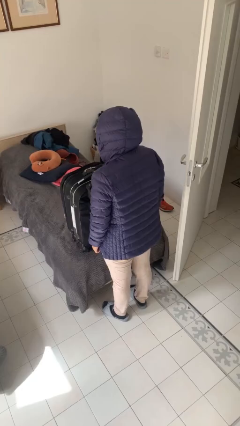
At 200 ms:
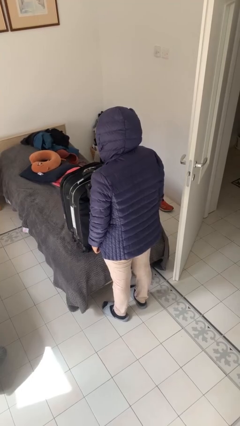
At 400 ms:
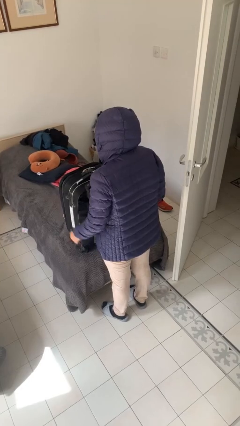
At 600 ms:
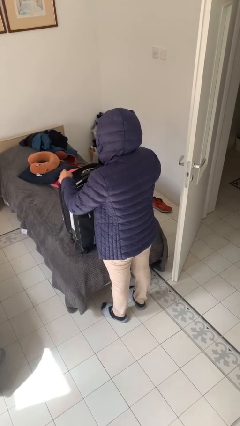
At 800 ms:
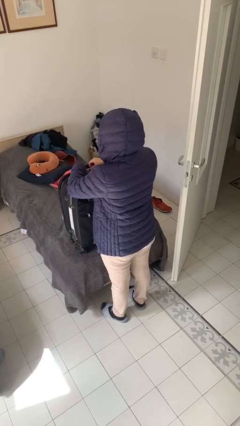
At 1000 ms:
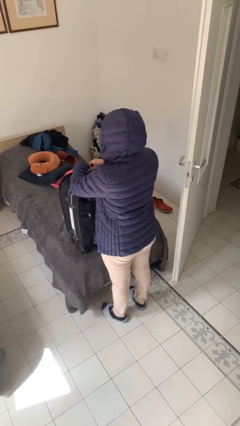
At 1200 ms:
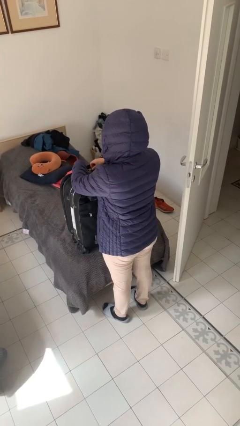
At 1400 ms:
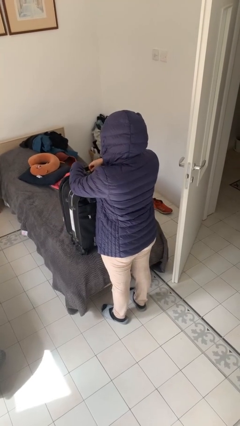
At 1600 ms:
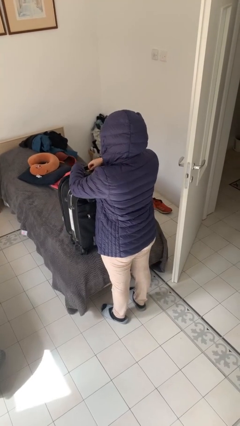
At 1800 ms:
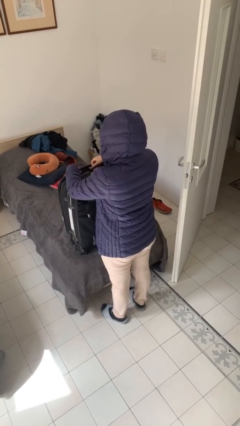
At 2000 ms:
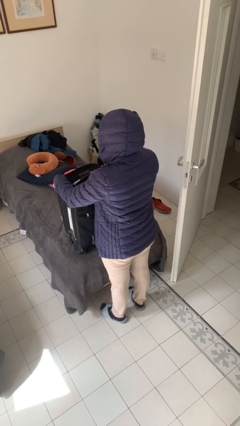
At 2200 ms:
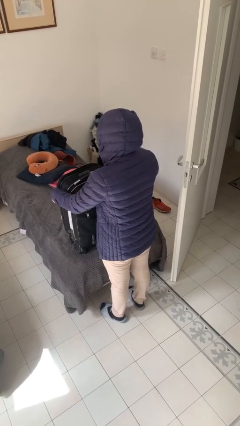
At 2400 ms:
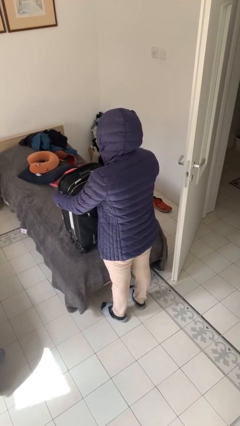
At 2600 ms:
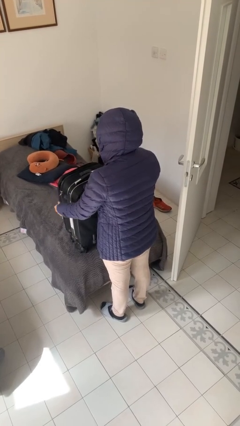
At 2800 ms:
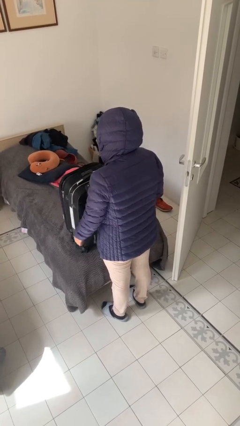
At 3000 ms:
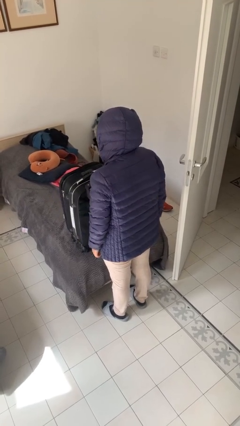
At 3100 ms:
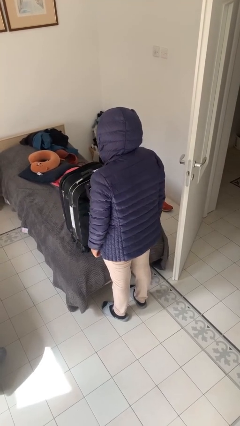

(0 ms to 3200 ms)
person opens suitcase

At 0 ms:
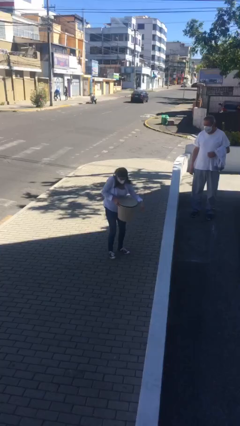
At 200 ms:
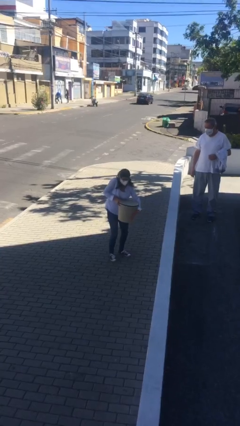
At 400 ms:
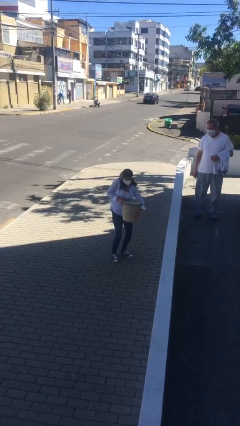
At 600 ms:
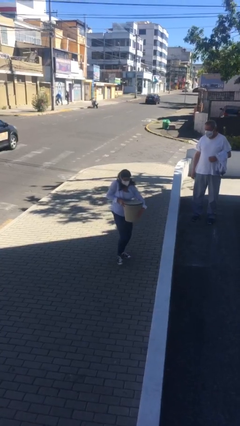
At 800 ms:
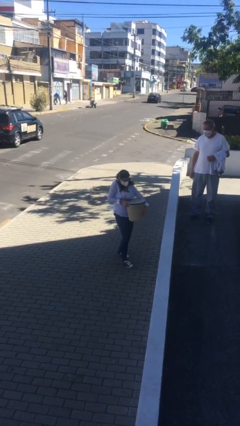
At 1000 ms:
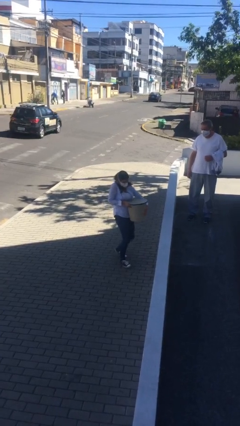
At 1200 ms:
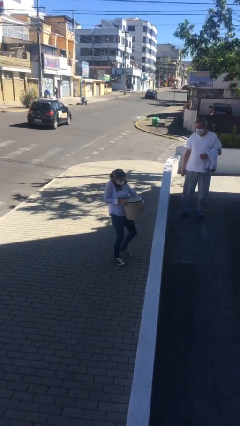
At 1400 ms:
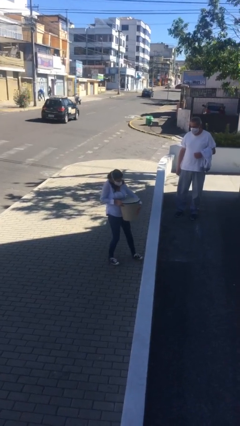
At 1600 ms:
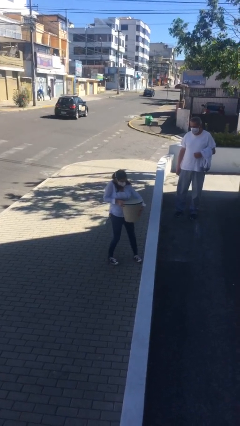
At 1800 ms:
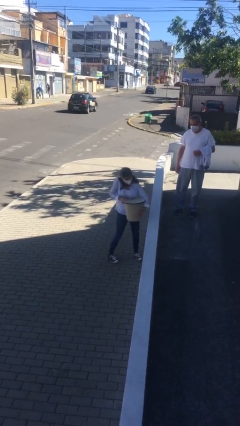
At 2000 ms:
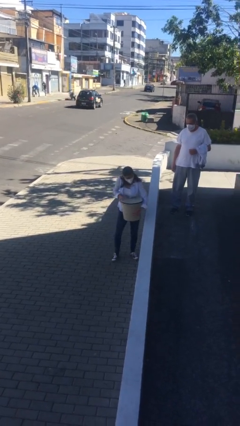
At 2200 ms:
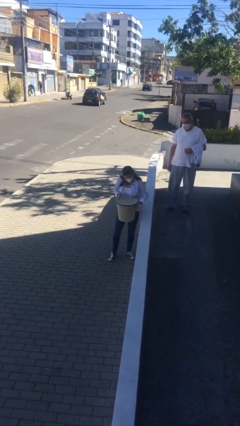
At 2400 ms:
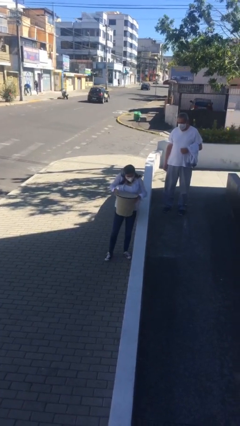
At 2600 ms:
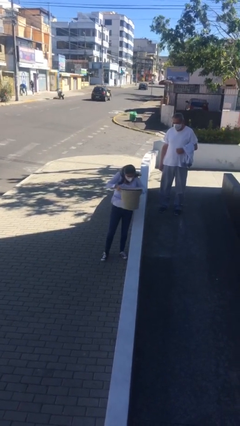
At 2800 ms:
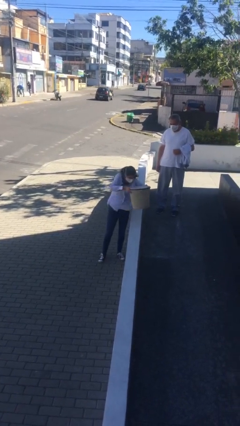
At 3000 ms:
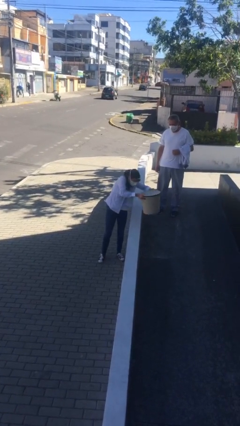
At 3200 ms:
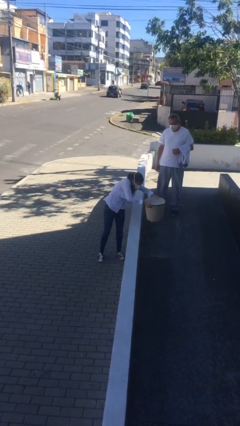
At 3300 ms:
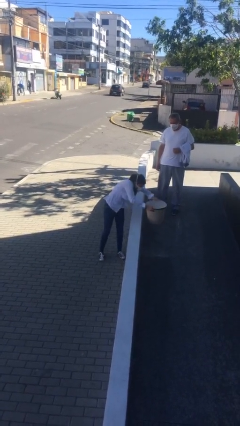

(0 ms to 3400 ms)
person carries heavy object

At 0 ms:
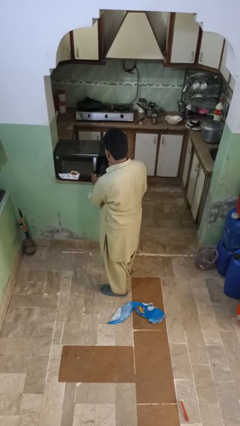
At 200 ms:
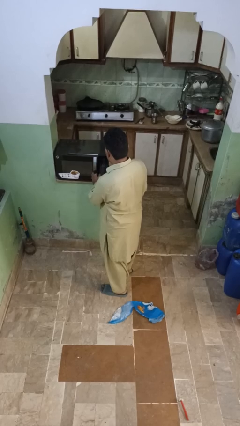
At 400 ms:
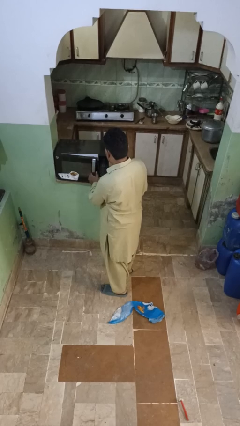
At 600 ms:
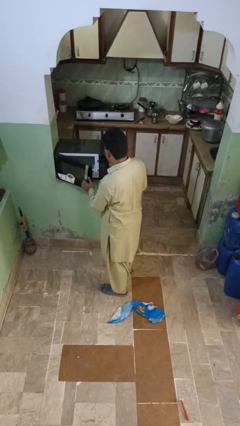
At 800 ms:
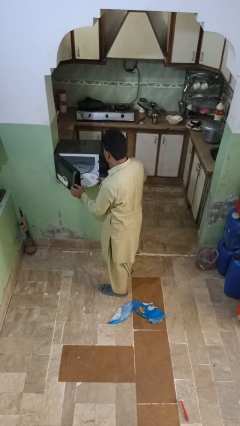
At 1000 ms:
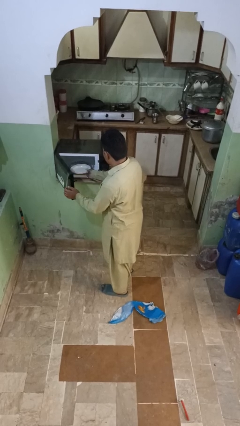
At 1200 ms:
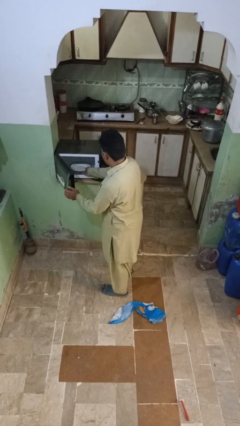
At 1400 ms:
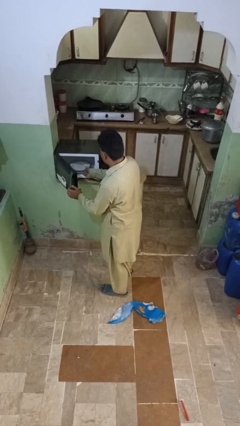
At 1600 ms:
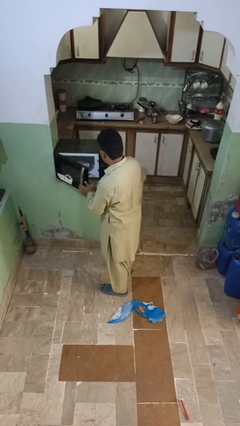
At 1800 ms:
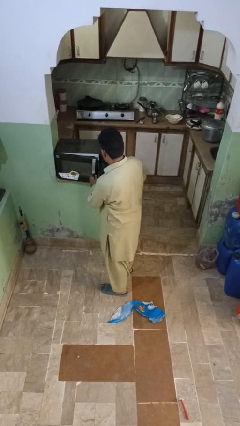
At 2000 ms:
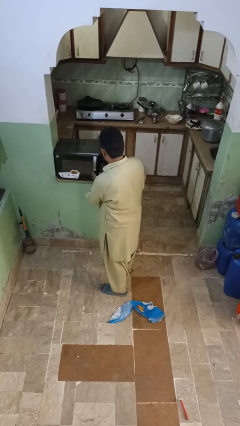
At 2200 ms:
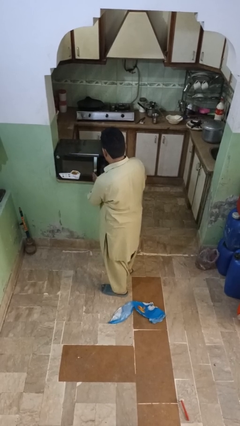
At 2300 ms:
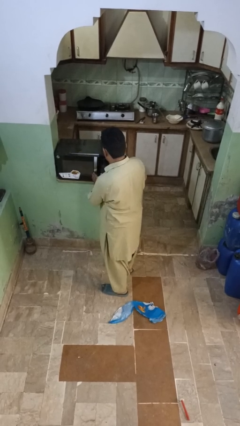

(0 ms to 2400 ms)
person puts object into microwave

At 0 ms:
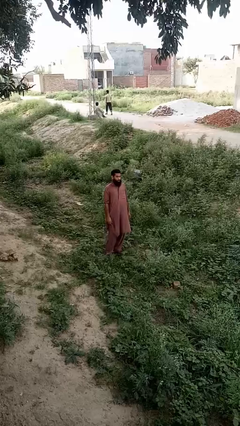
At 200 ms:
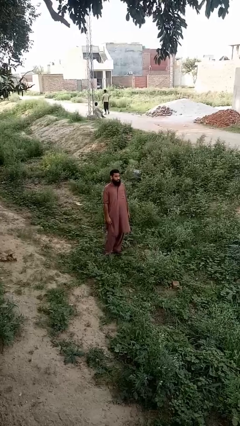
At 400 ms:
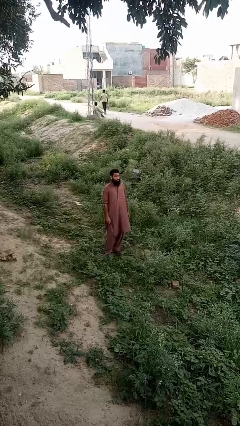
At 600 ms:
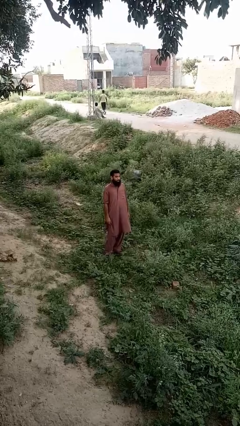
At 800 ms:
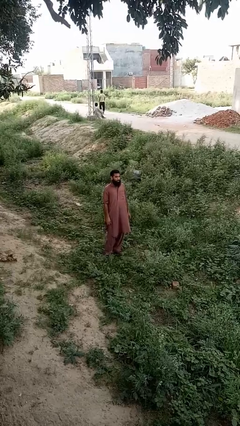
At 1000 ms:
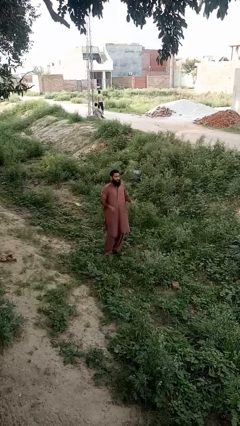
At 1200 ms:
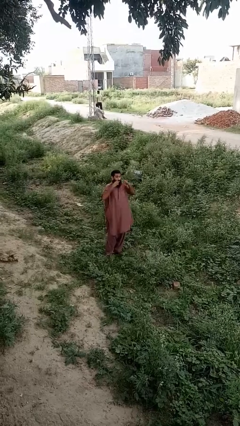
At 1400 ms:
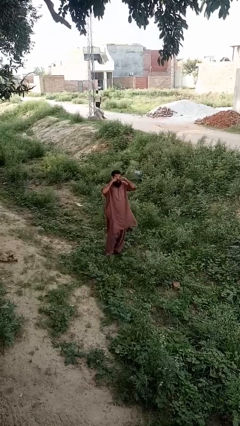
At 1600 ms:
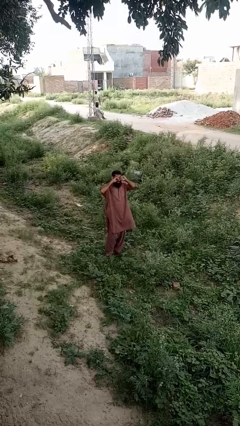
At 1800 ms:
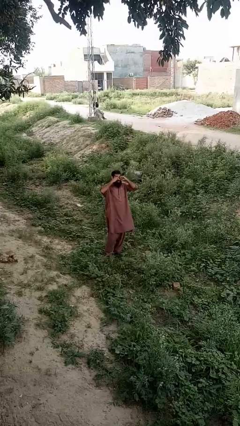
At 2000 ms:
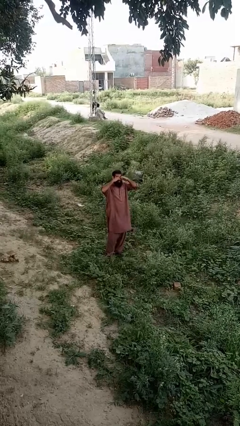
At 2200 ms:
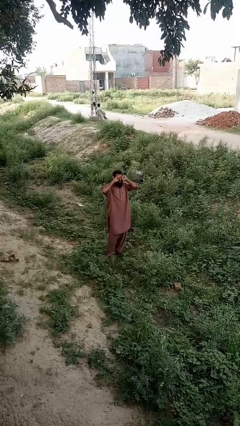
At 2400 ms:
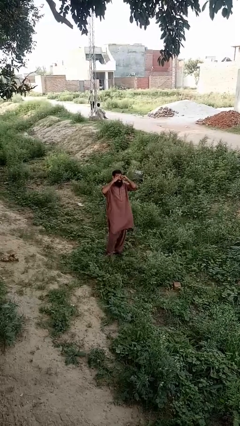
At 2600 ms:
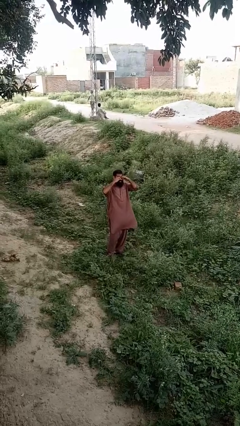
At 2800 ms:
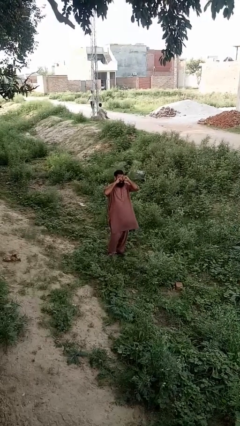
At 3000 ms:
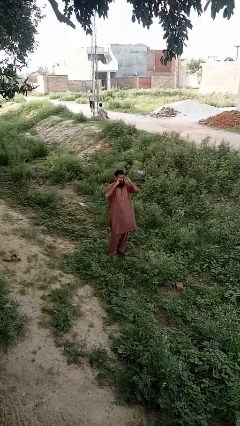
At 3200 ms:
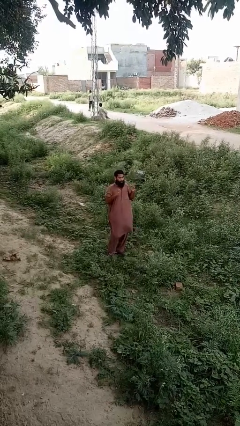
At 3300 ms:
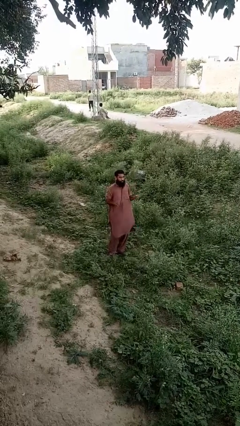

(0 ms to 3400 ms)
person rubs eyes

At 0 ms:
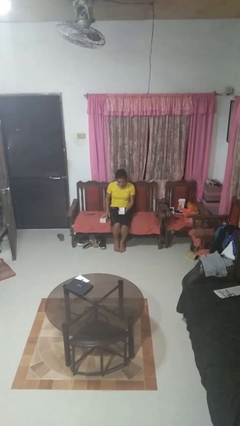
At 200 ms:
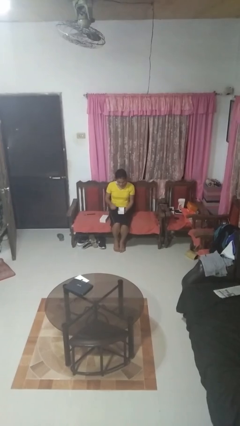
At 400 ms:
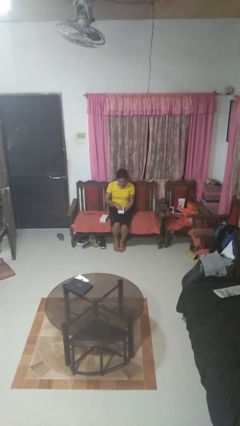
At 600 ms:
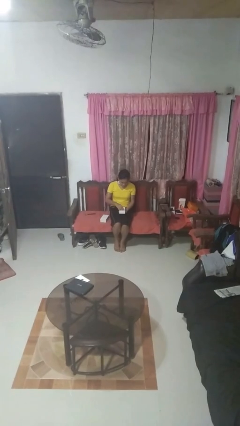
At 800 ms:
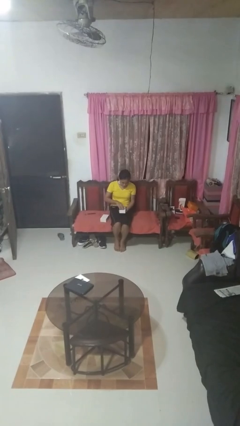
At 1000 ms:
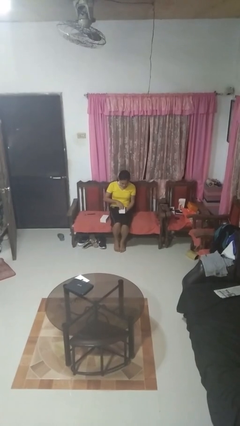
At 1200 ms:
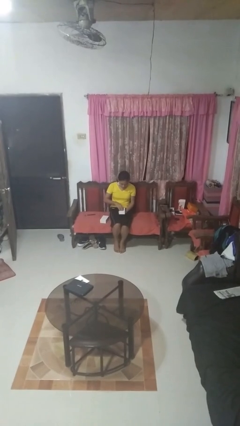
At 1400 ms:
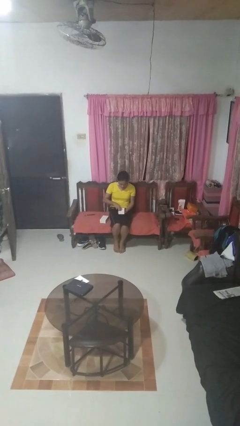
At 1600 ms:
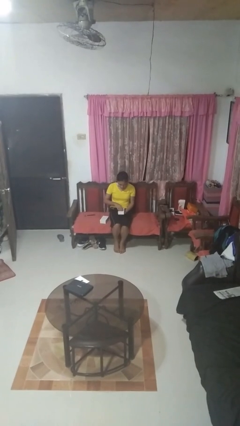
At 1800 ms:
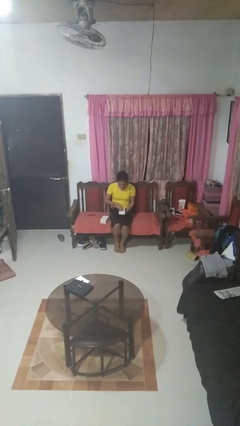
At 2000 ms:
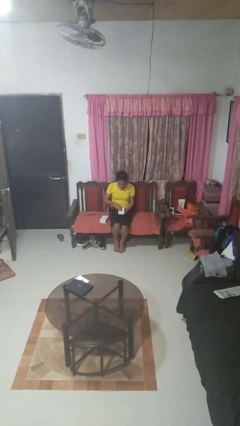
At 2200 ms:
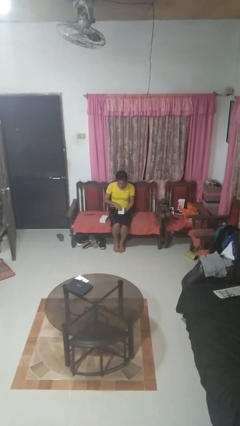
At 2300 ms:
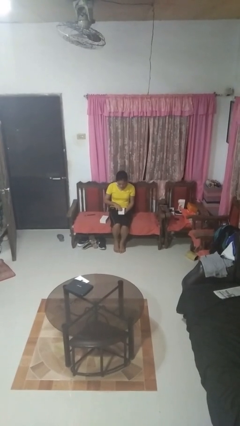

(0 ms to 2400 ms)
person searches jewelry box

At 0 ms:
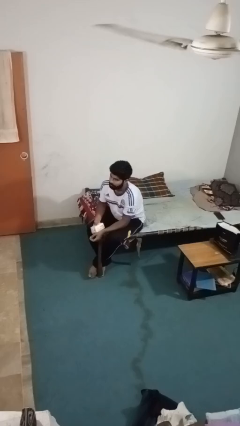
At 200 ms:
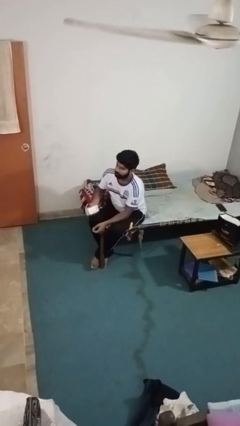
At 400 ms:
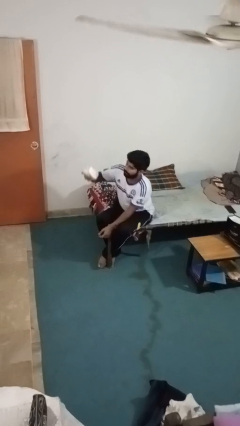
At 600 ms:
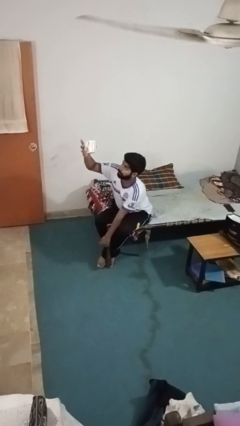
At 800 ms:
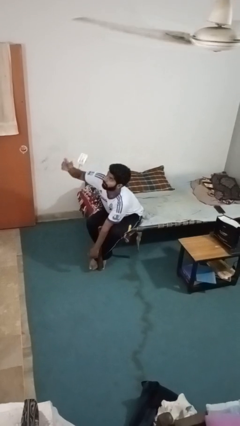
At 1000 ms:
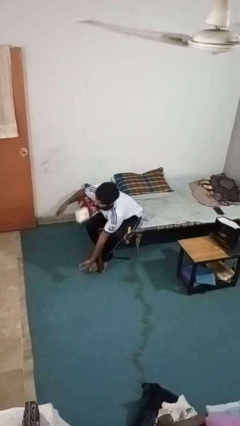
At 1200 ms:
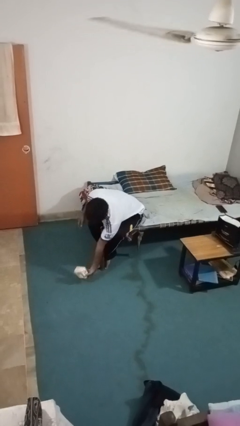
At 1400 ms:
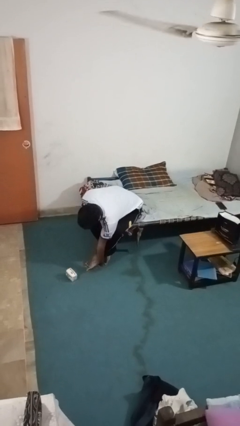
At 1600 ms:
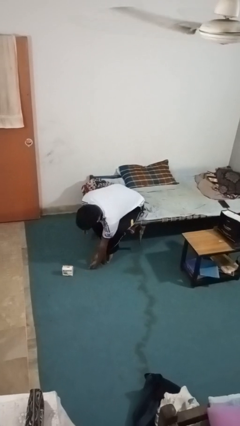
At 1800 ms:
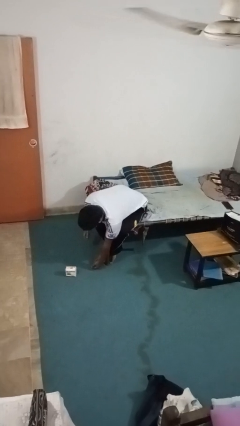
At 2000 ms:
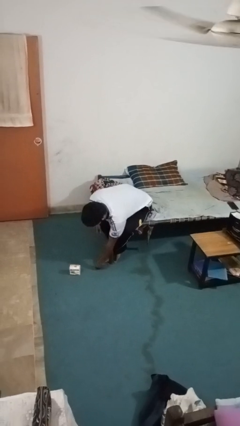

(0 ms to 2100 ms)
person drops object

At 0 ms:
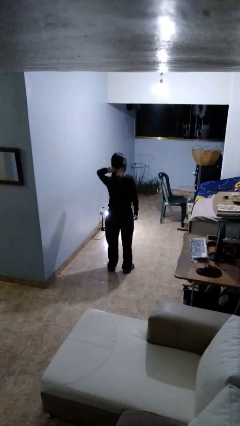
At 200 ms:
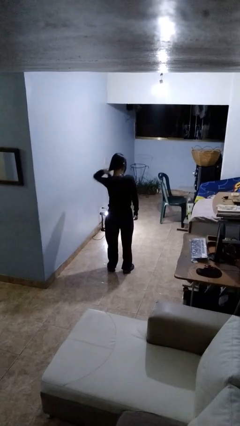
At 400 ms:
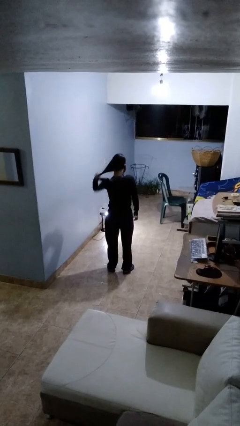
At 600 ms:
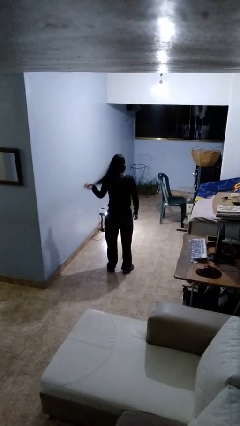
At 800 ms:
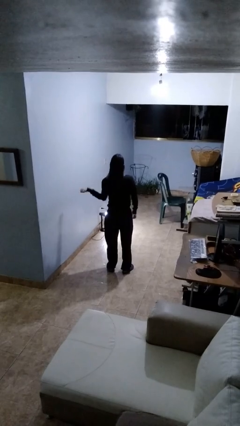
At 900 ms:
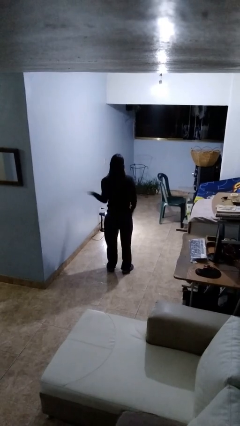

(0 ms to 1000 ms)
person takes off hairtie
